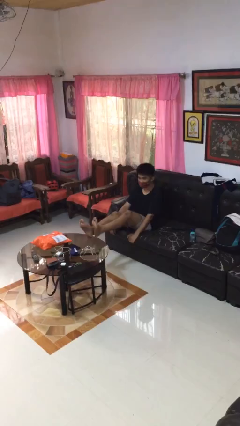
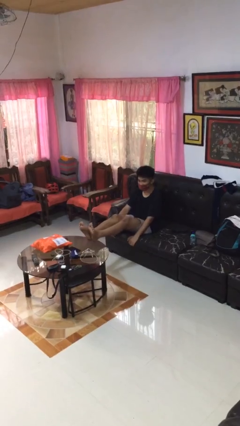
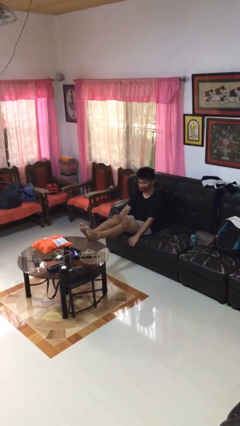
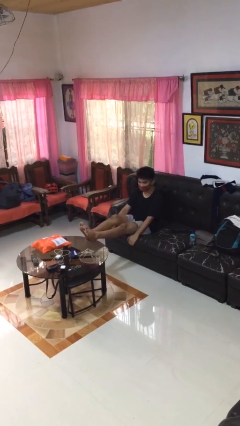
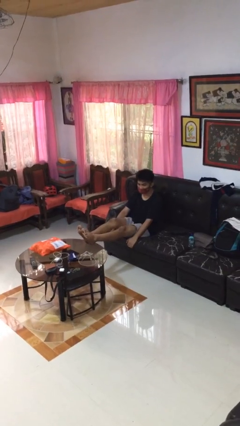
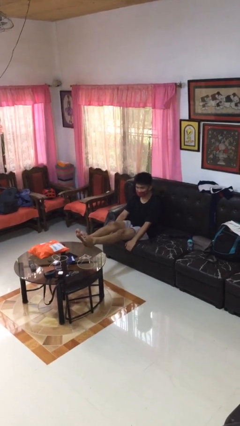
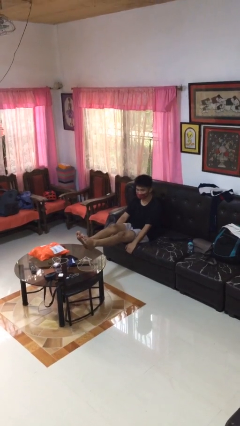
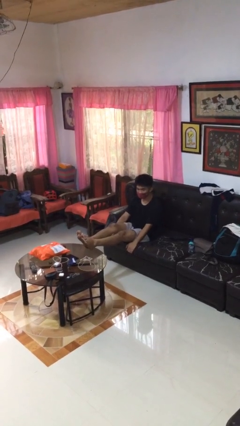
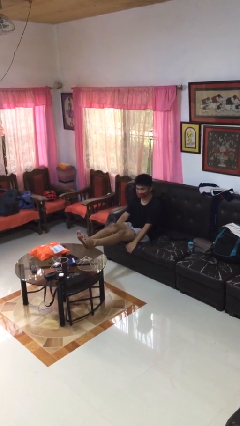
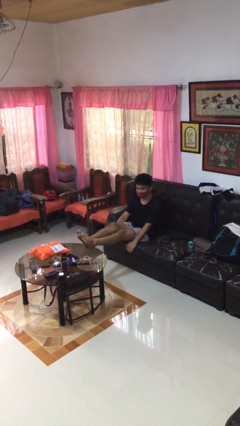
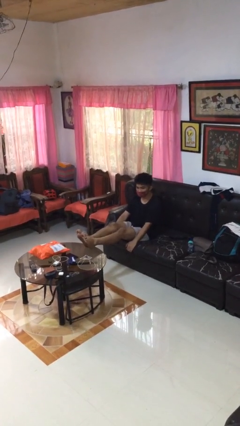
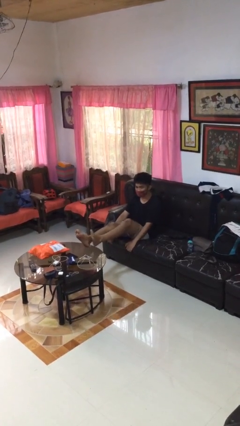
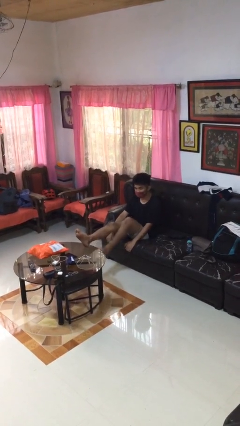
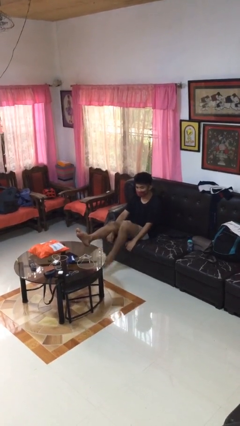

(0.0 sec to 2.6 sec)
person puts feet up

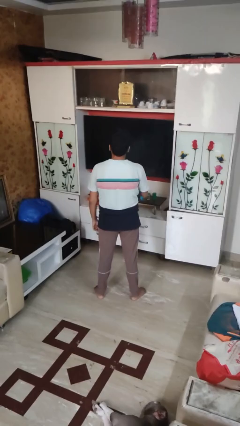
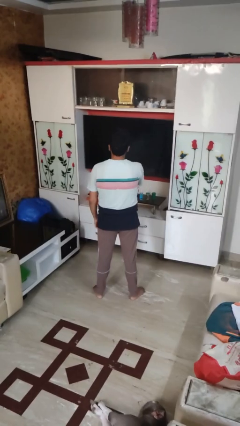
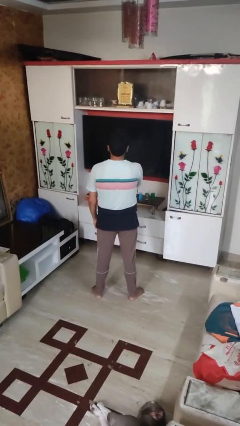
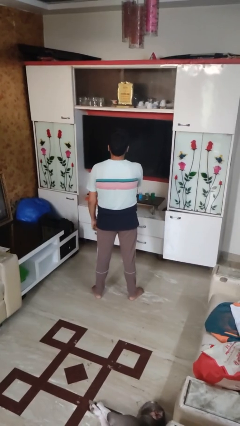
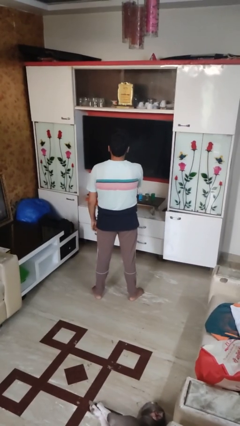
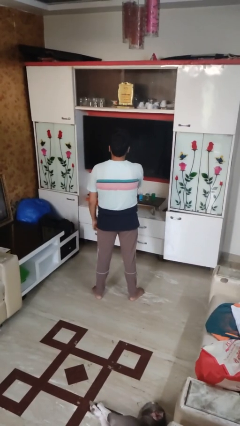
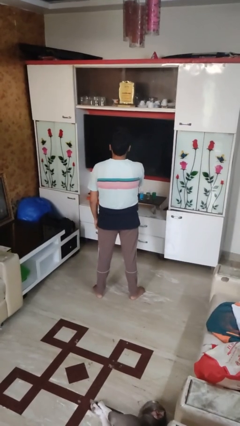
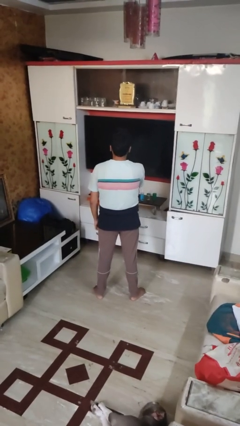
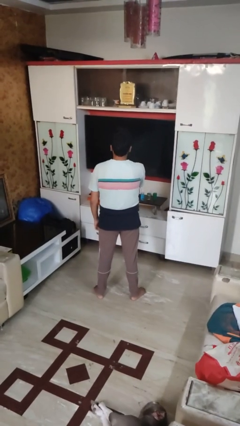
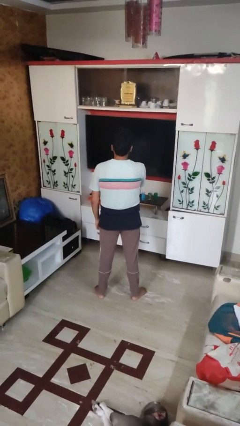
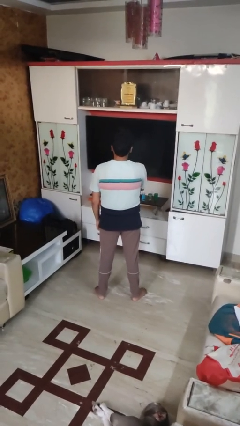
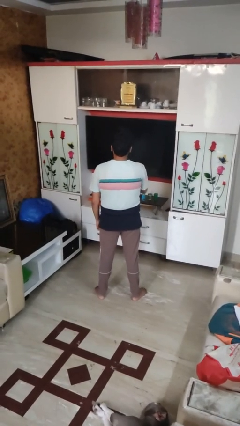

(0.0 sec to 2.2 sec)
person gestures be quiet

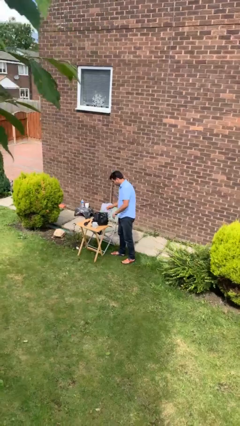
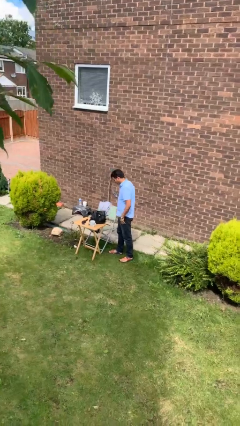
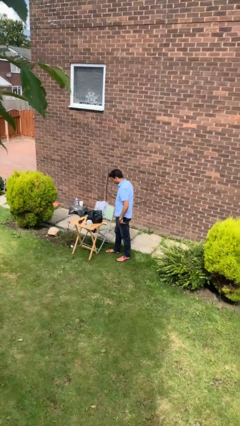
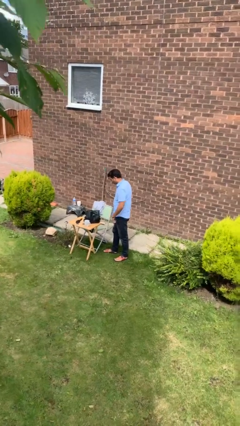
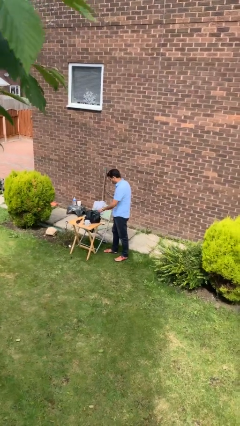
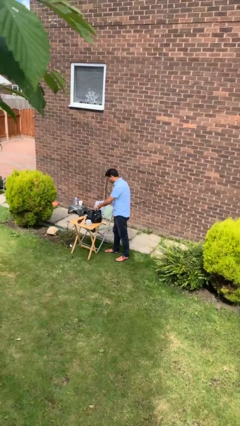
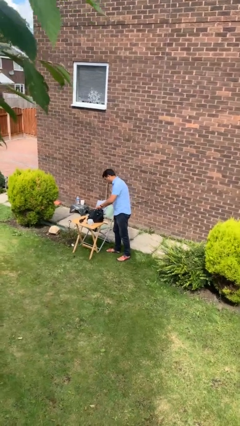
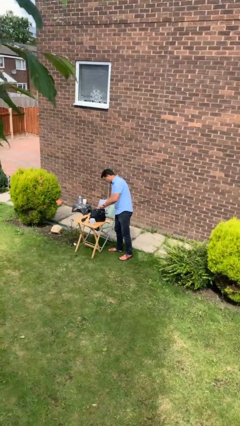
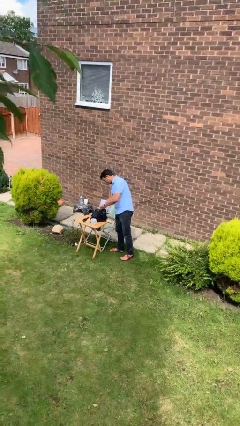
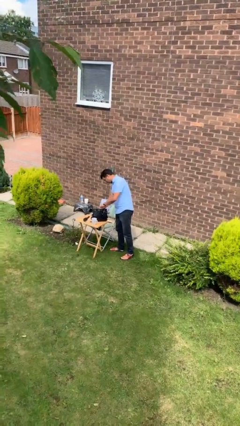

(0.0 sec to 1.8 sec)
person searches in backpack

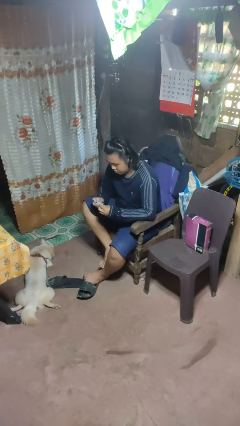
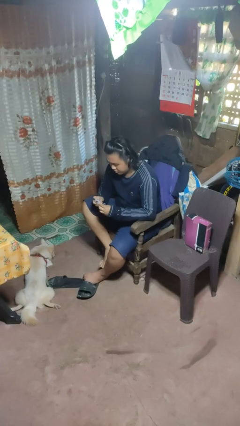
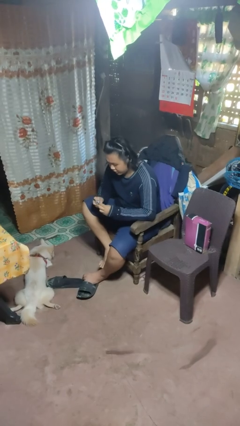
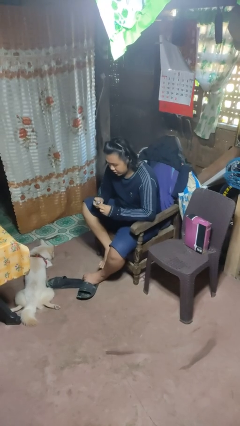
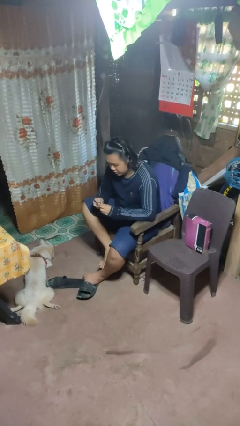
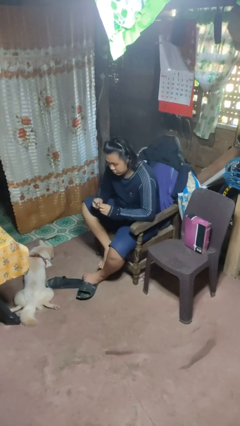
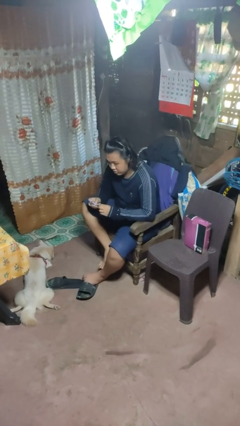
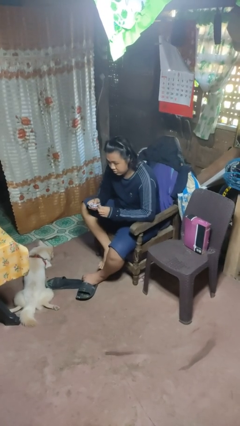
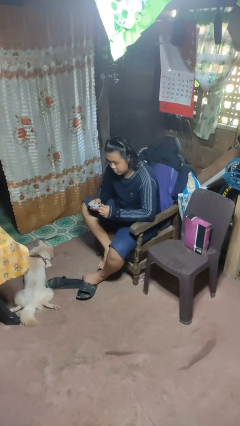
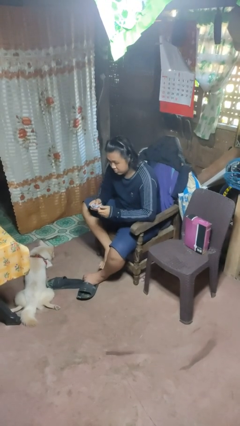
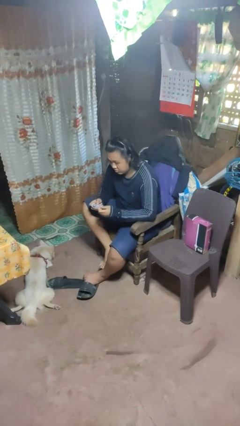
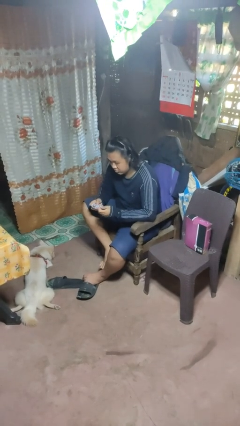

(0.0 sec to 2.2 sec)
person files fingernails

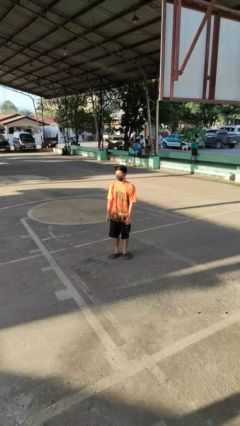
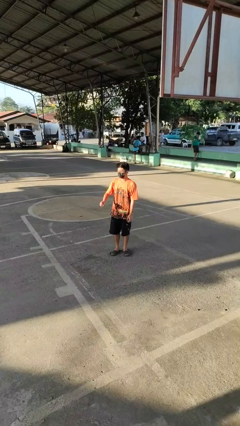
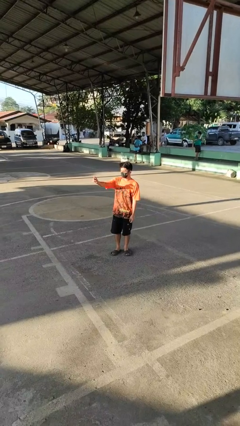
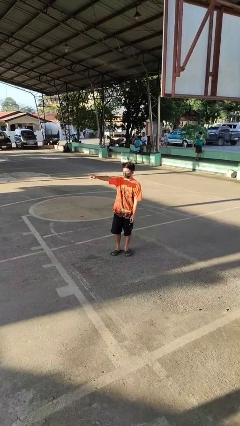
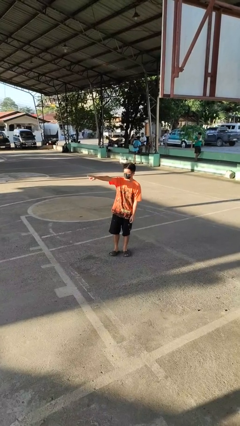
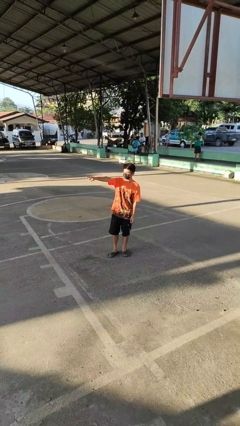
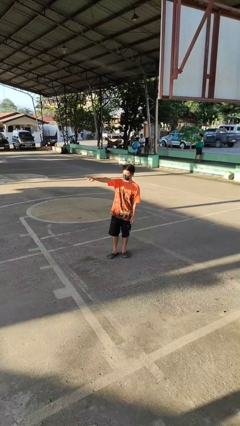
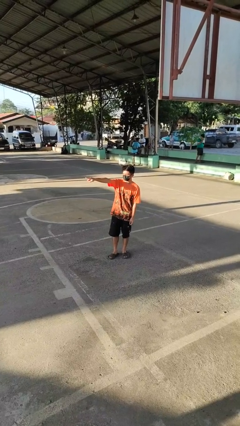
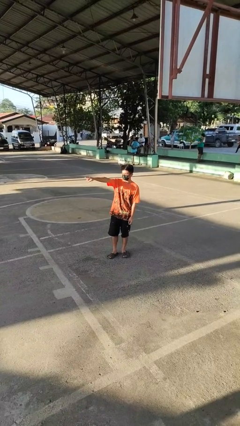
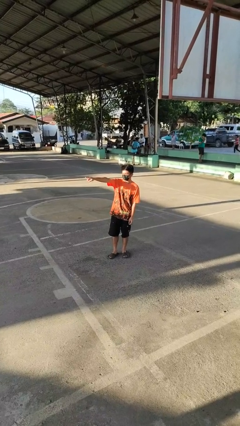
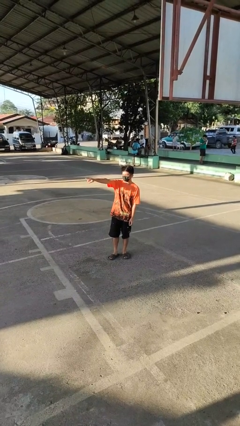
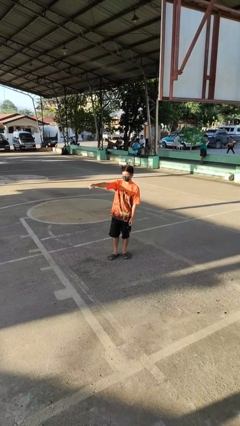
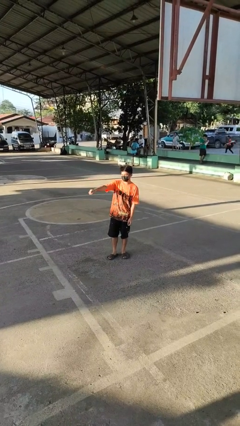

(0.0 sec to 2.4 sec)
person points at person

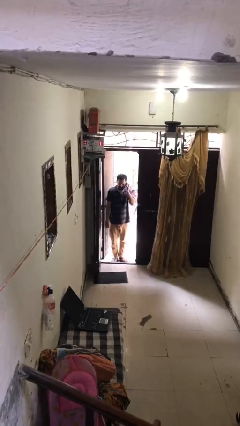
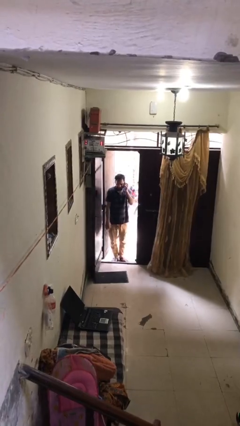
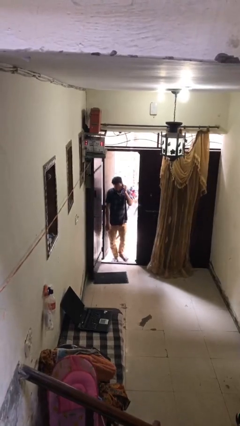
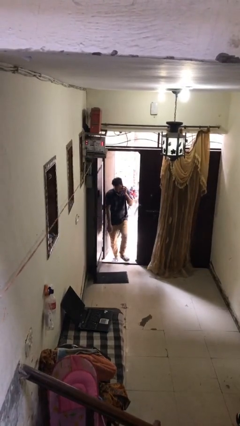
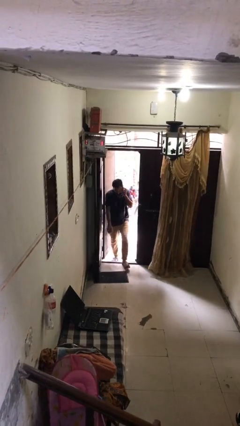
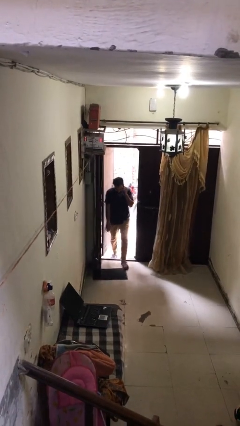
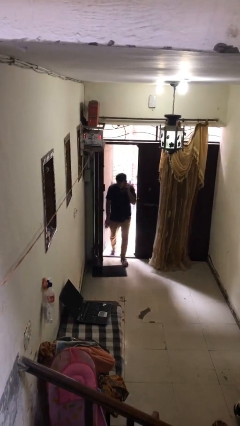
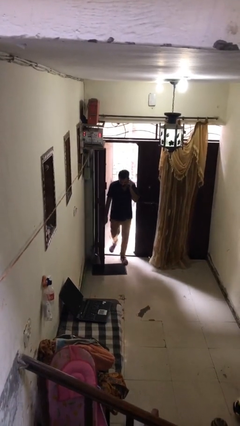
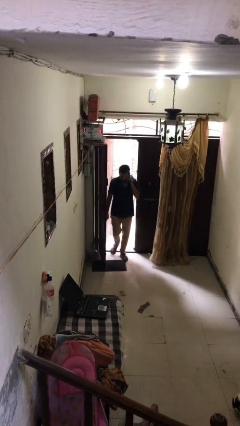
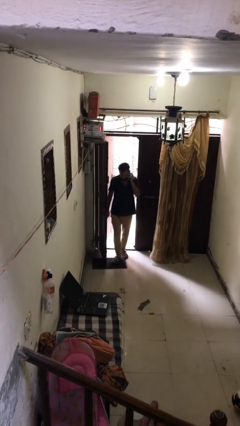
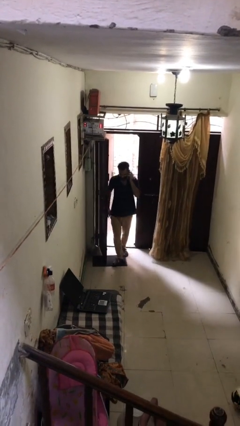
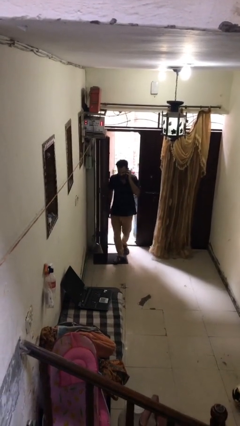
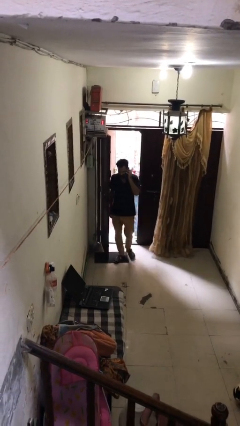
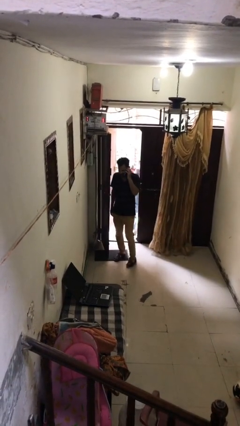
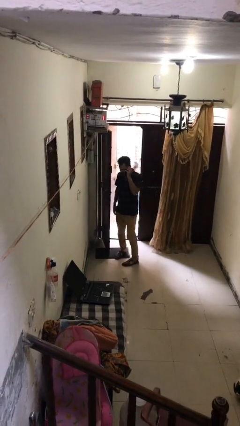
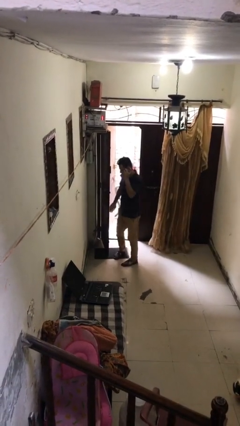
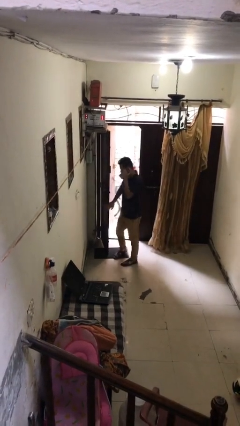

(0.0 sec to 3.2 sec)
person enters scene through structure

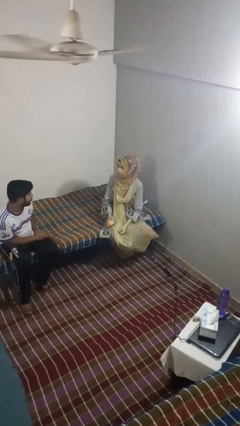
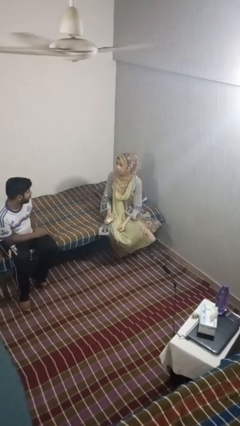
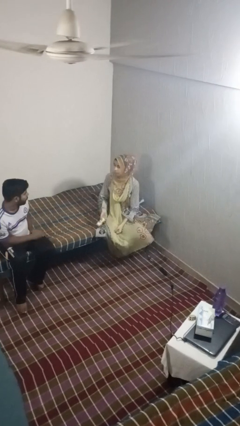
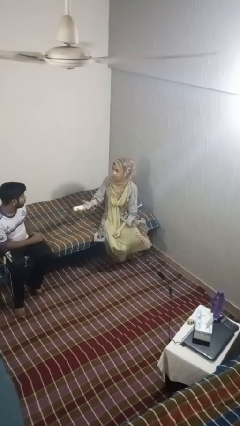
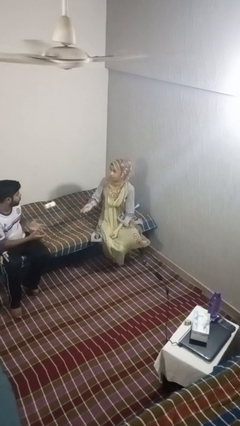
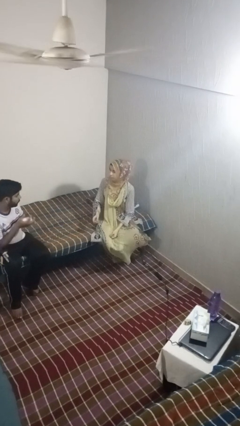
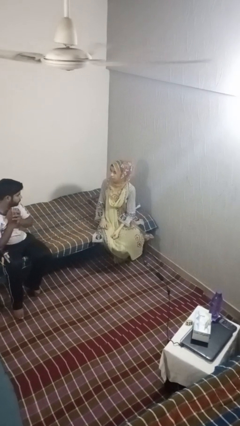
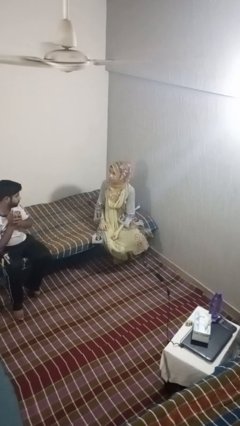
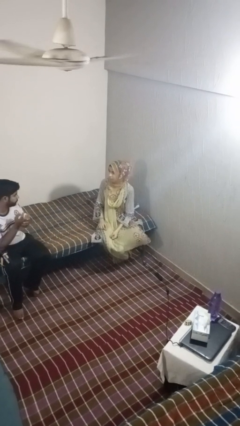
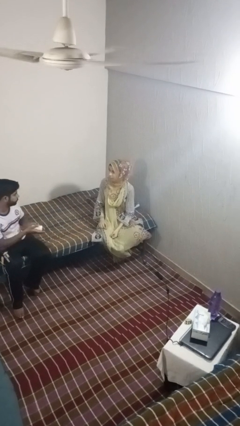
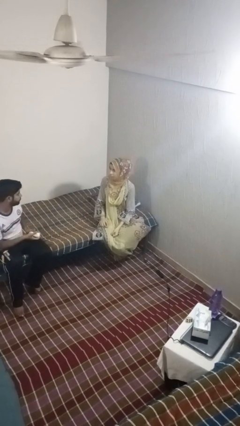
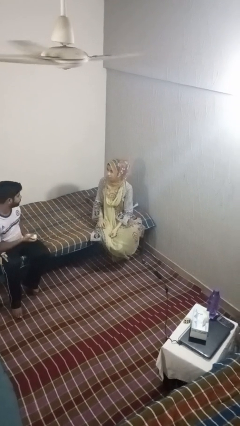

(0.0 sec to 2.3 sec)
person throws object to person

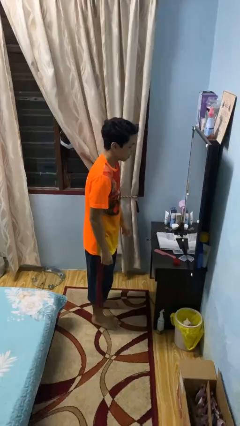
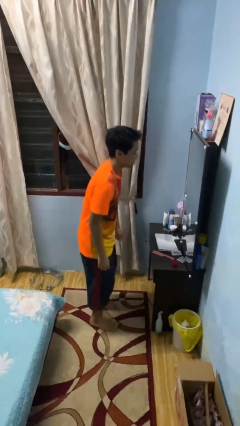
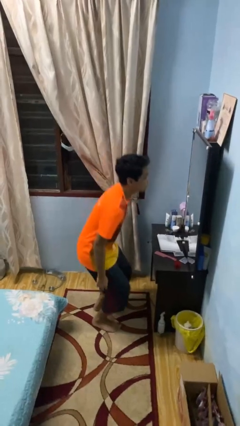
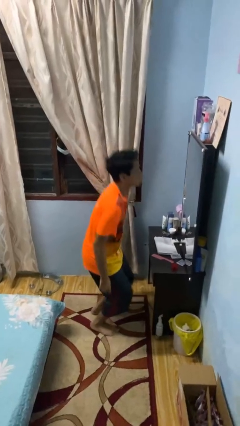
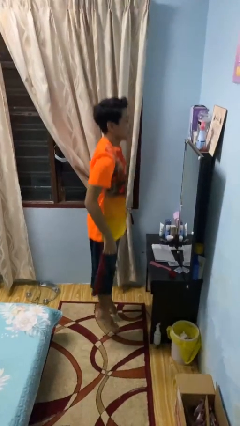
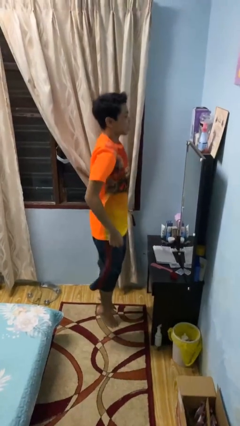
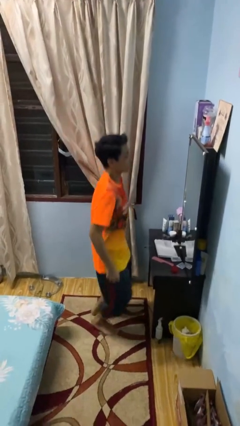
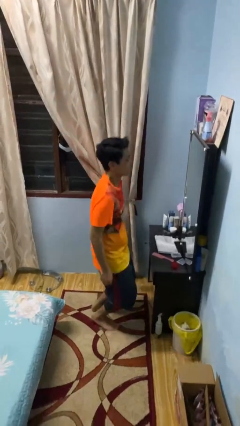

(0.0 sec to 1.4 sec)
person jumps
